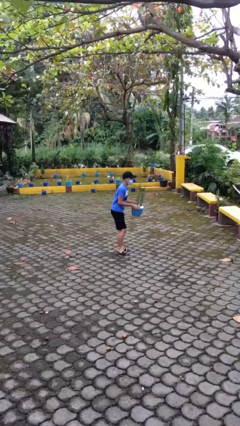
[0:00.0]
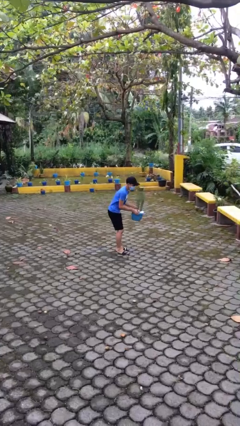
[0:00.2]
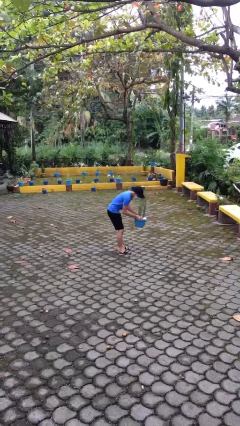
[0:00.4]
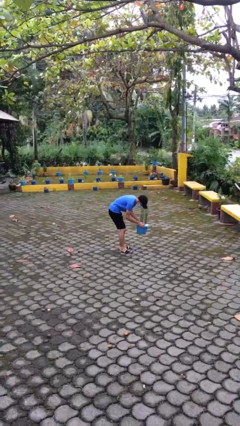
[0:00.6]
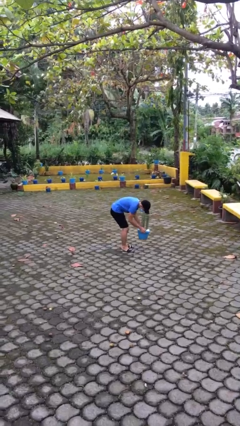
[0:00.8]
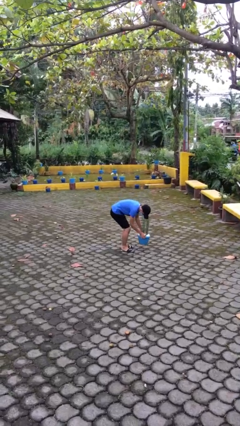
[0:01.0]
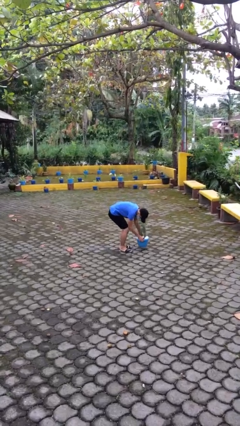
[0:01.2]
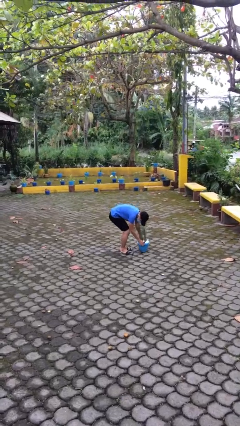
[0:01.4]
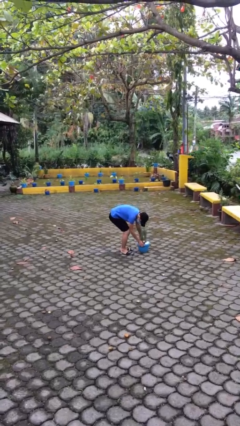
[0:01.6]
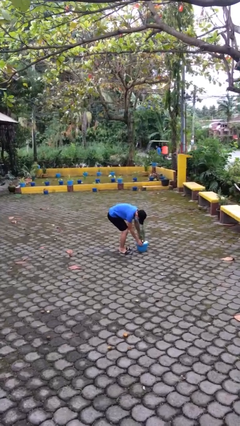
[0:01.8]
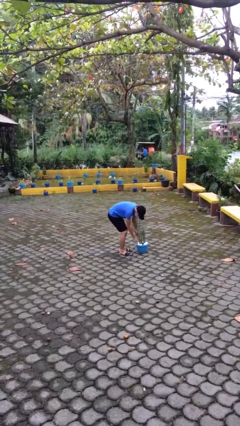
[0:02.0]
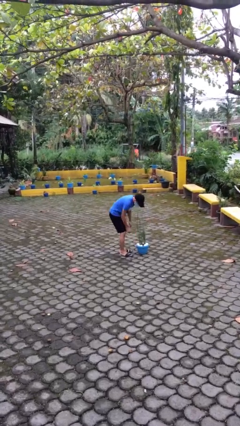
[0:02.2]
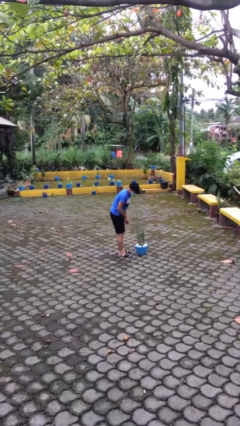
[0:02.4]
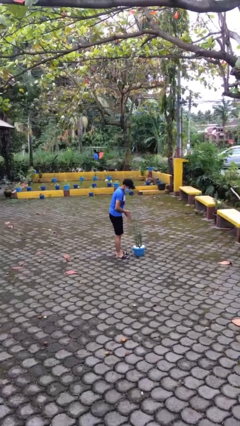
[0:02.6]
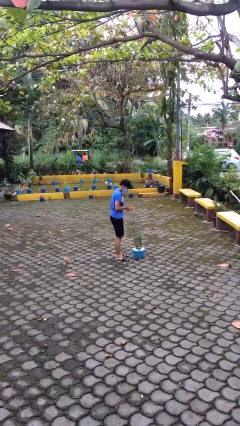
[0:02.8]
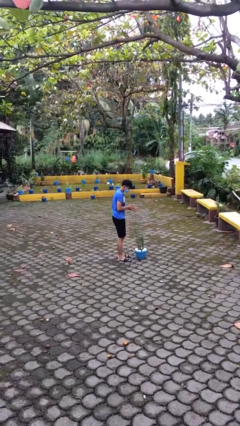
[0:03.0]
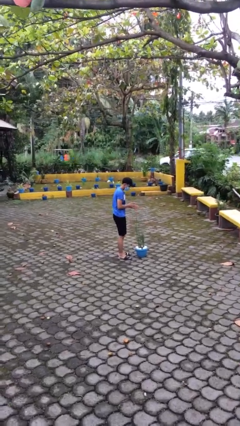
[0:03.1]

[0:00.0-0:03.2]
person puts down object on floor

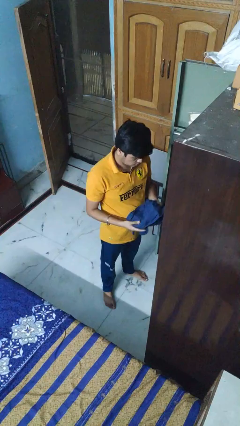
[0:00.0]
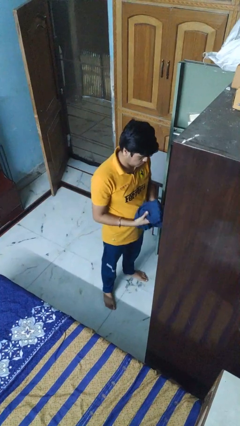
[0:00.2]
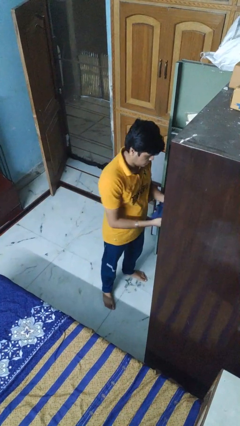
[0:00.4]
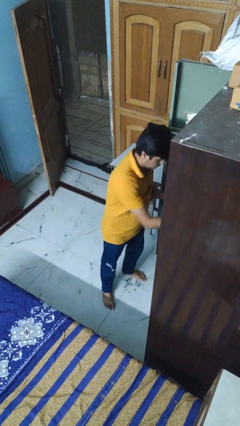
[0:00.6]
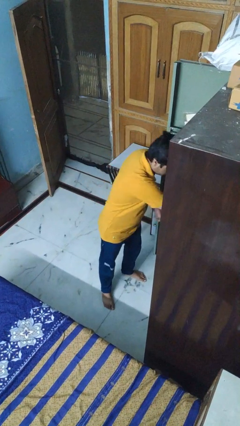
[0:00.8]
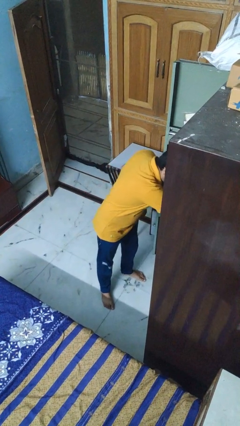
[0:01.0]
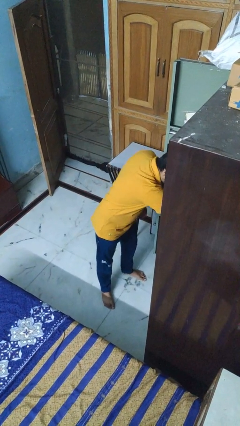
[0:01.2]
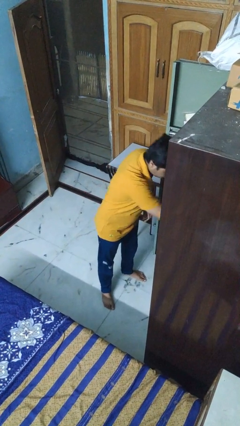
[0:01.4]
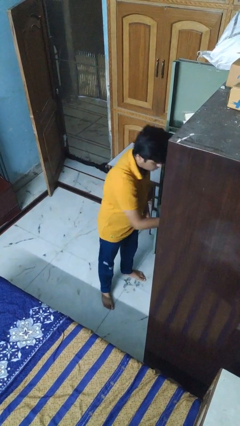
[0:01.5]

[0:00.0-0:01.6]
person puts clothes into dresser

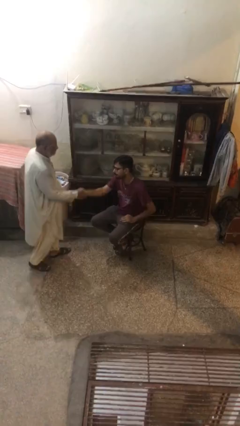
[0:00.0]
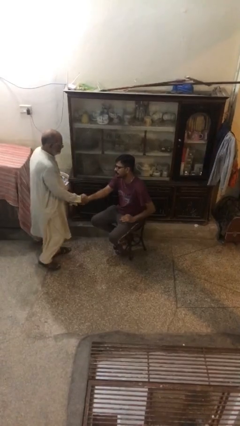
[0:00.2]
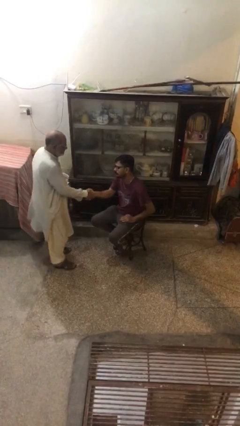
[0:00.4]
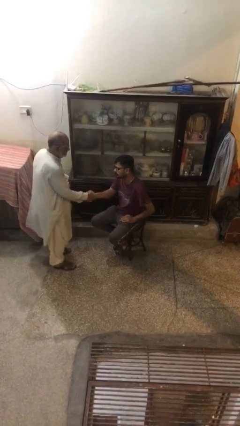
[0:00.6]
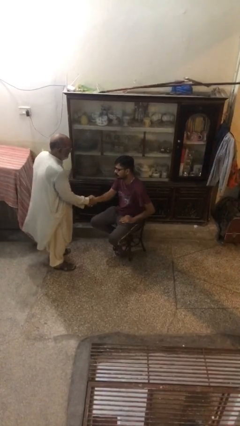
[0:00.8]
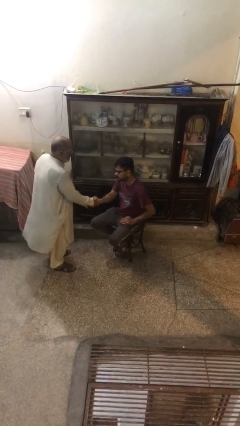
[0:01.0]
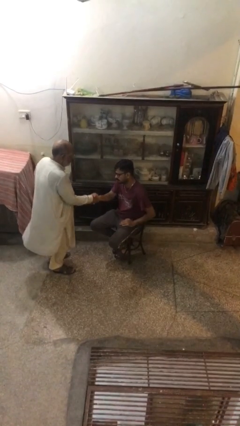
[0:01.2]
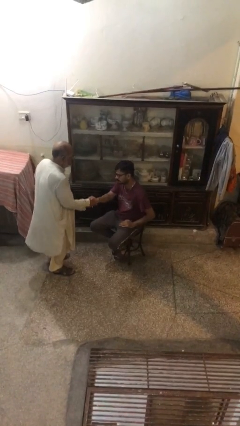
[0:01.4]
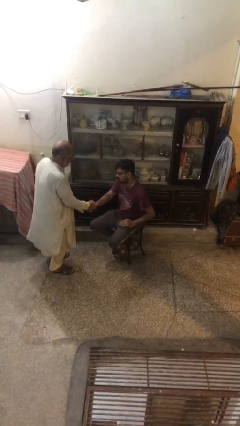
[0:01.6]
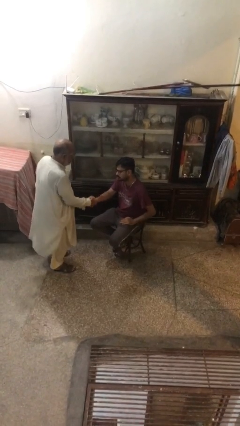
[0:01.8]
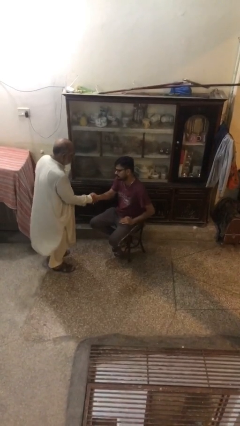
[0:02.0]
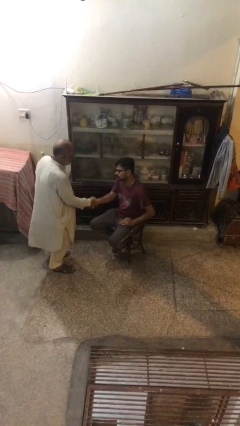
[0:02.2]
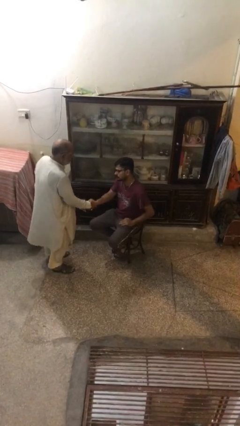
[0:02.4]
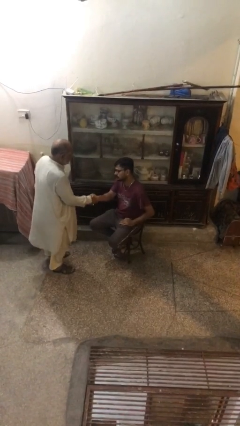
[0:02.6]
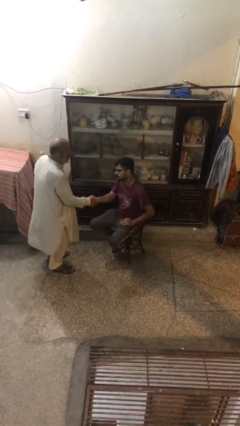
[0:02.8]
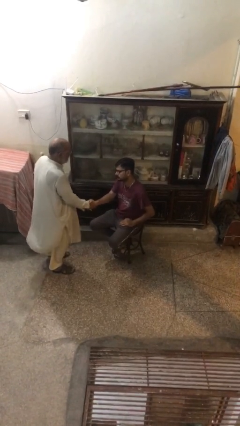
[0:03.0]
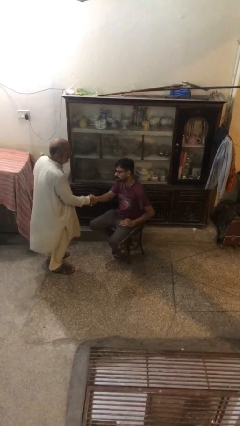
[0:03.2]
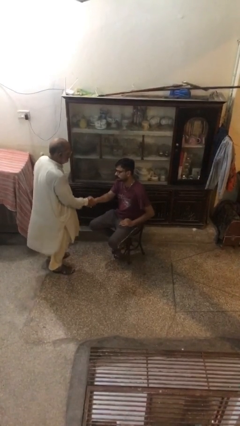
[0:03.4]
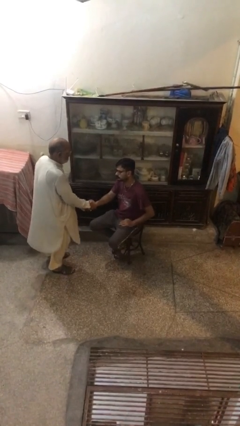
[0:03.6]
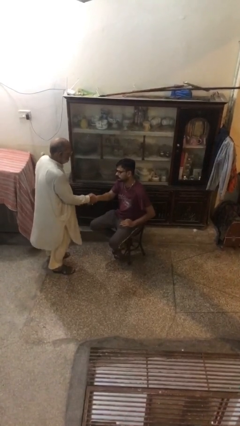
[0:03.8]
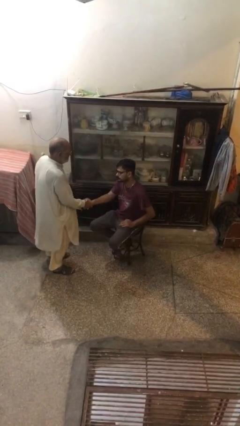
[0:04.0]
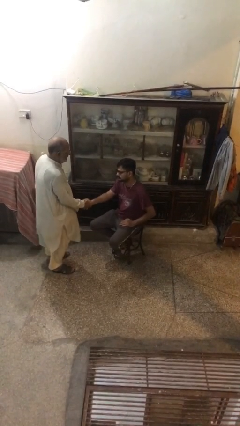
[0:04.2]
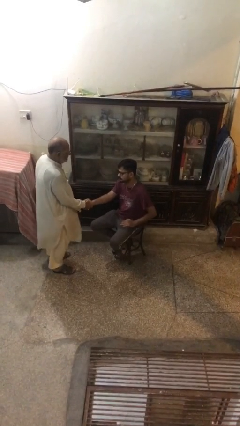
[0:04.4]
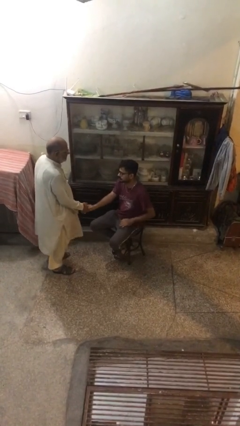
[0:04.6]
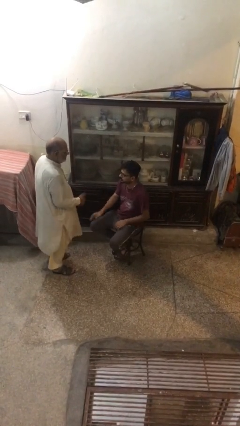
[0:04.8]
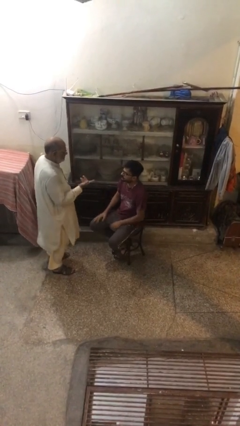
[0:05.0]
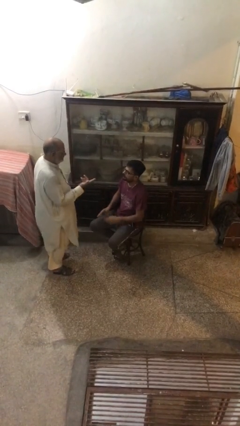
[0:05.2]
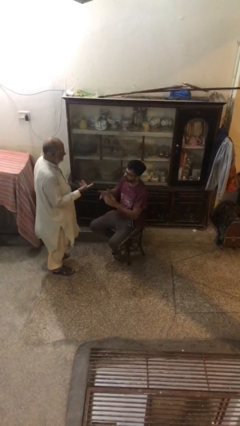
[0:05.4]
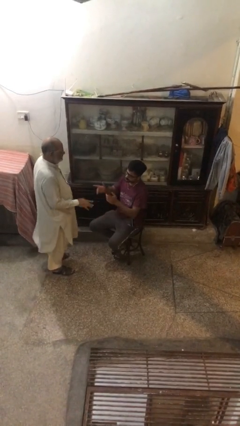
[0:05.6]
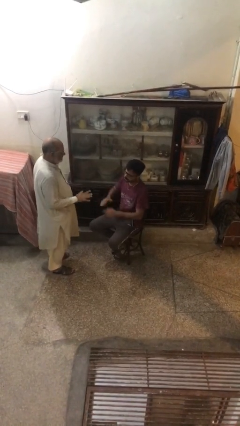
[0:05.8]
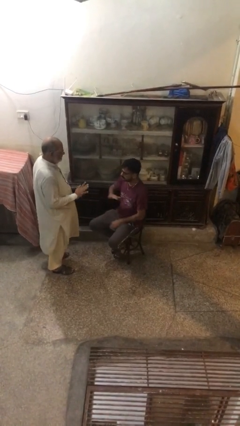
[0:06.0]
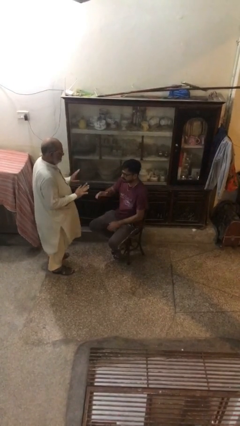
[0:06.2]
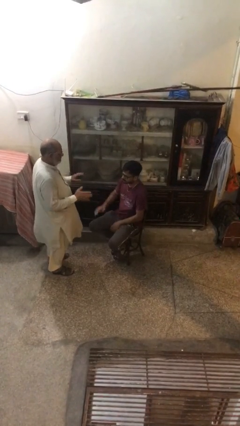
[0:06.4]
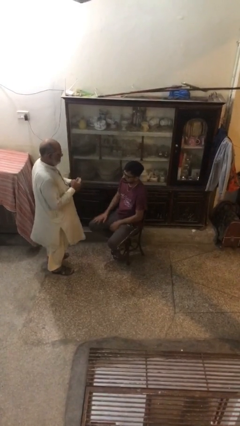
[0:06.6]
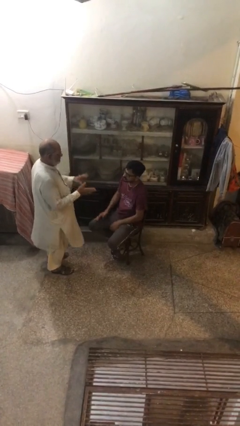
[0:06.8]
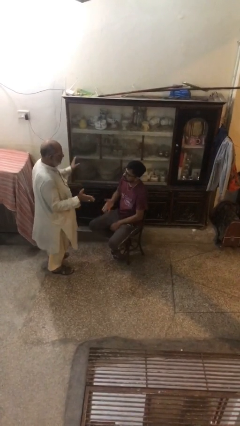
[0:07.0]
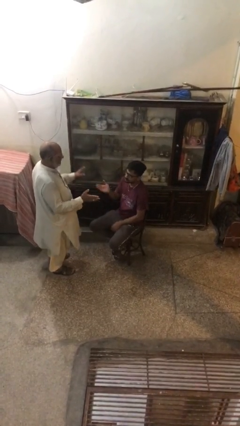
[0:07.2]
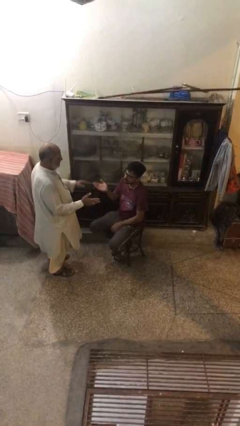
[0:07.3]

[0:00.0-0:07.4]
person shakes hand

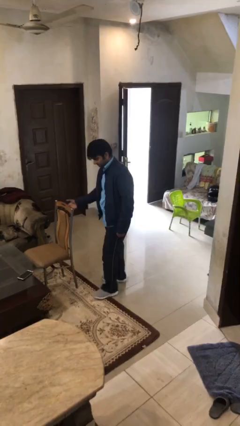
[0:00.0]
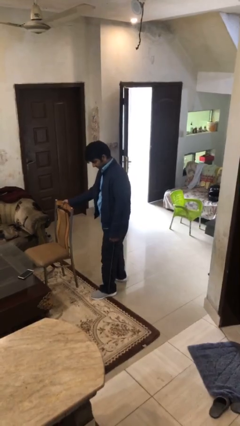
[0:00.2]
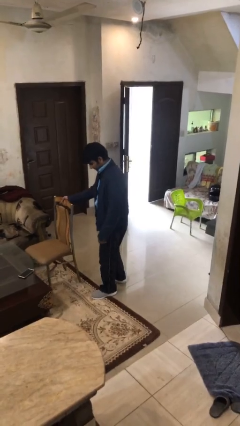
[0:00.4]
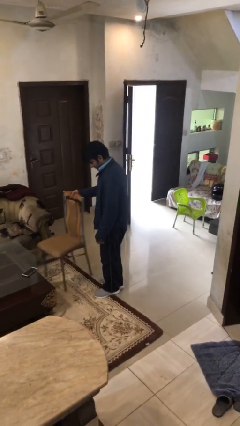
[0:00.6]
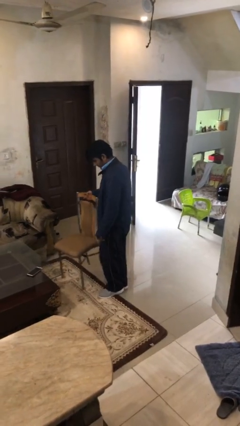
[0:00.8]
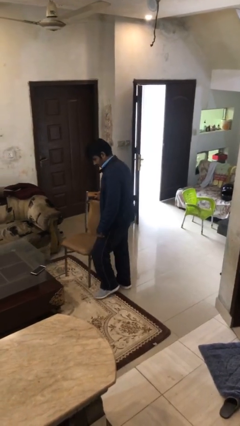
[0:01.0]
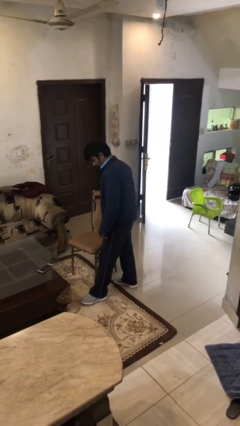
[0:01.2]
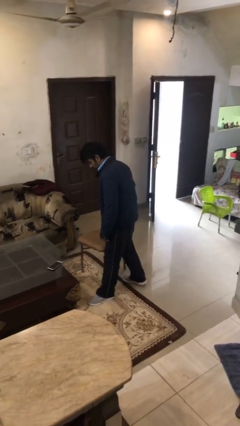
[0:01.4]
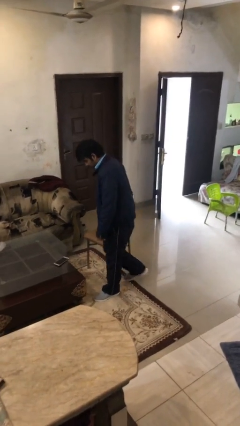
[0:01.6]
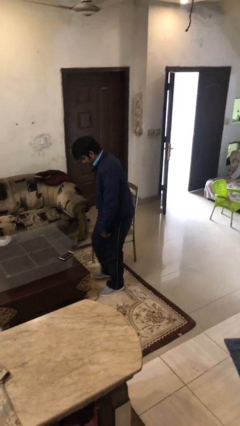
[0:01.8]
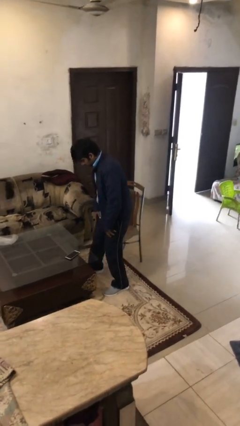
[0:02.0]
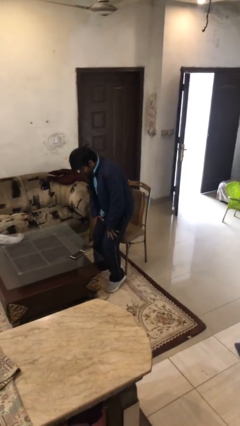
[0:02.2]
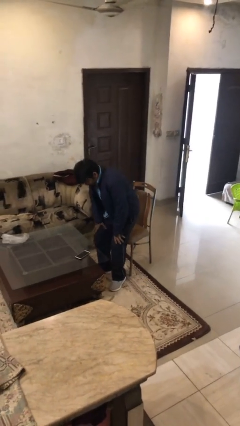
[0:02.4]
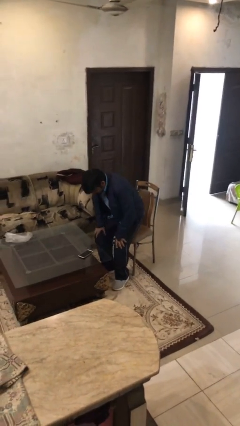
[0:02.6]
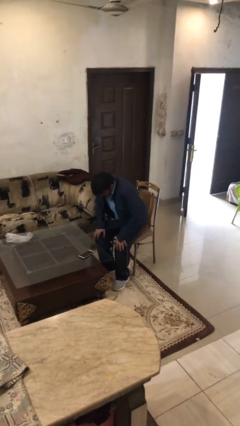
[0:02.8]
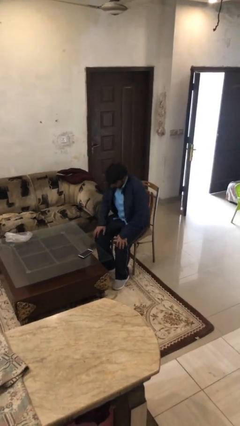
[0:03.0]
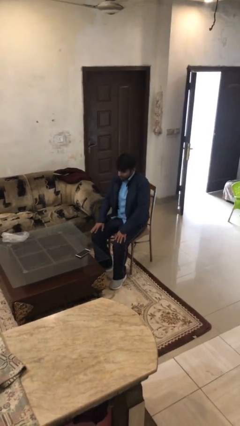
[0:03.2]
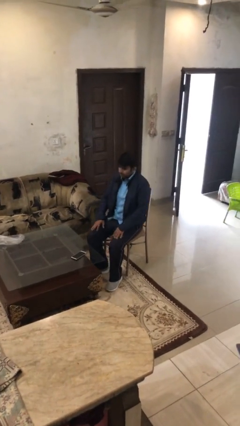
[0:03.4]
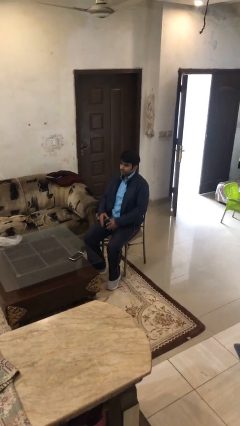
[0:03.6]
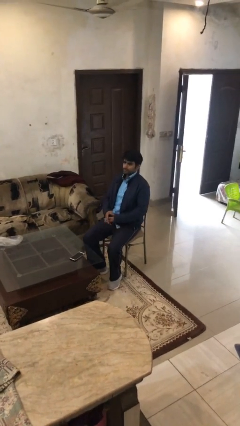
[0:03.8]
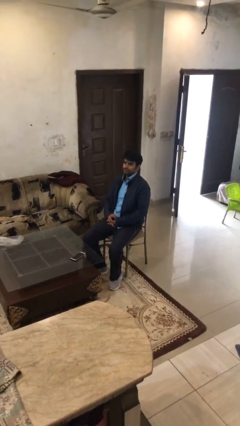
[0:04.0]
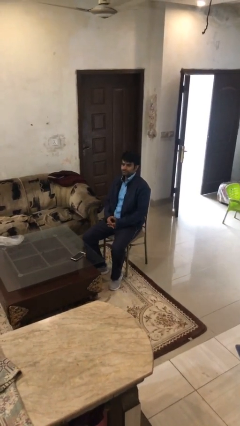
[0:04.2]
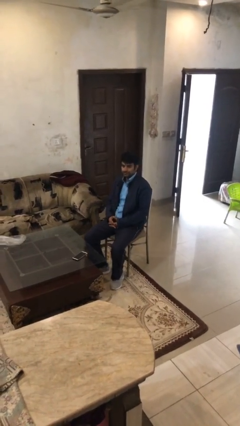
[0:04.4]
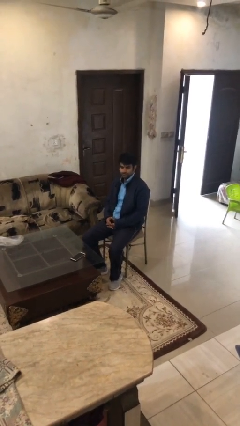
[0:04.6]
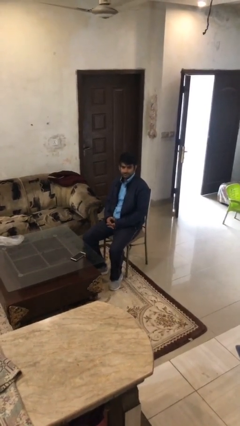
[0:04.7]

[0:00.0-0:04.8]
person sits down

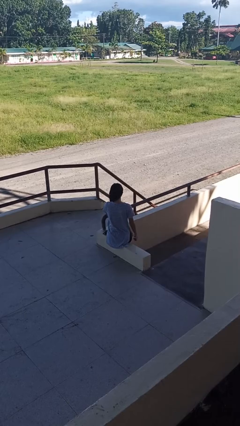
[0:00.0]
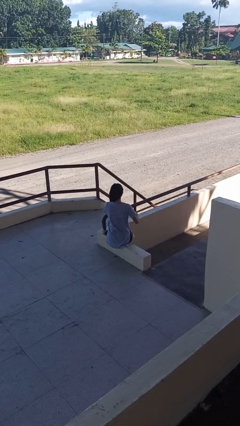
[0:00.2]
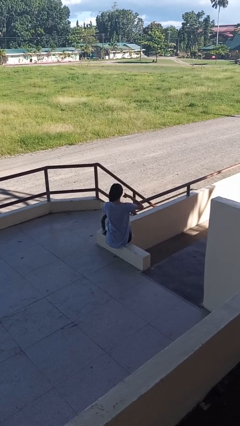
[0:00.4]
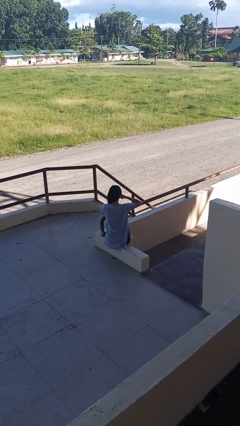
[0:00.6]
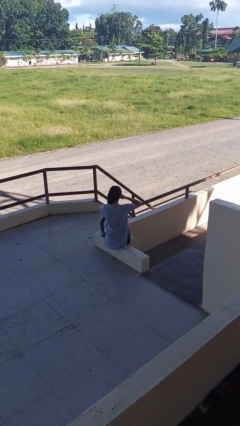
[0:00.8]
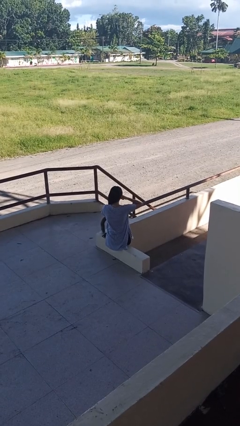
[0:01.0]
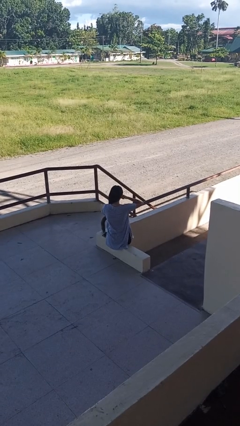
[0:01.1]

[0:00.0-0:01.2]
person gestures call me
